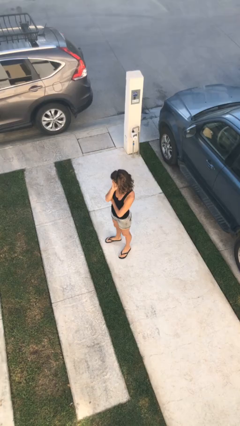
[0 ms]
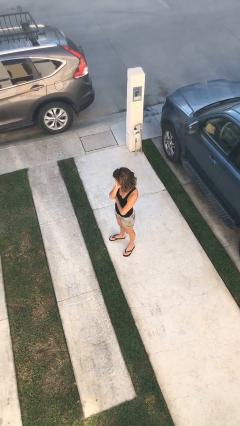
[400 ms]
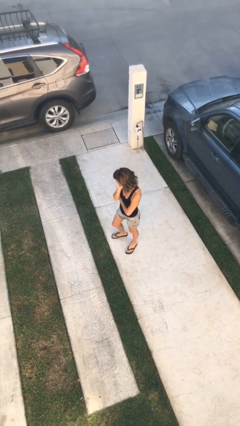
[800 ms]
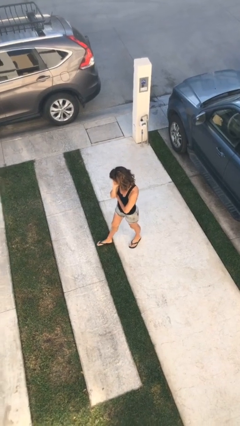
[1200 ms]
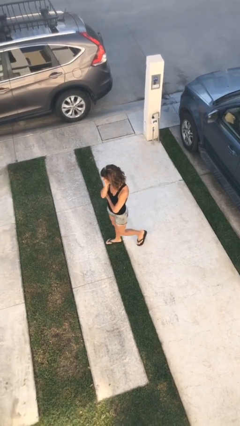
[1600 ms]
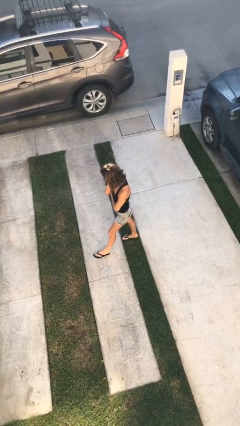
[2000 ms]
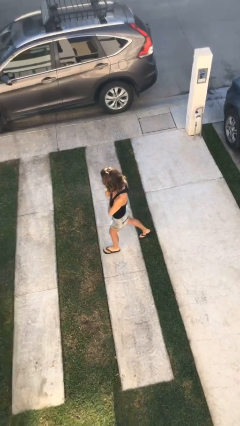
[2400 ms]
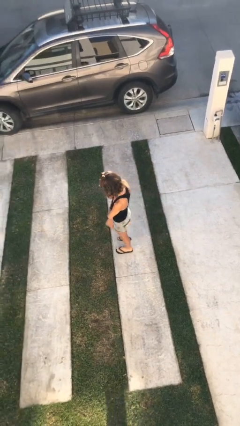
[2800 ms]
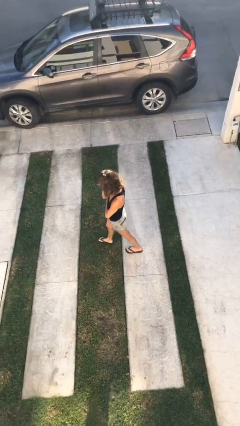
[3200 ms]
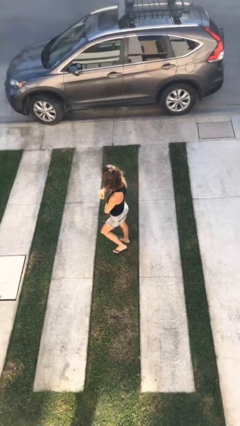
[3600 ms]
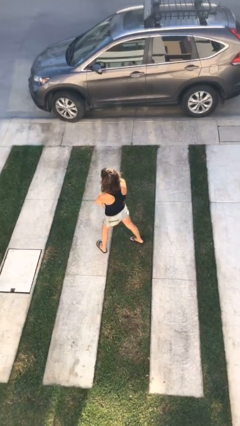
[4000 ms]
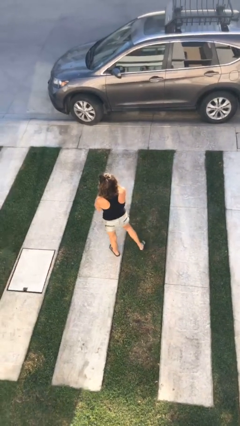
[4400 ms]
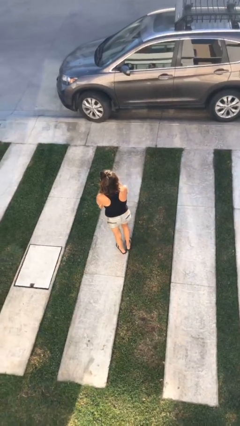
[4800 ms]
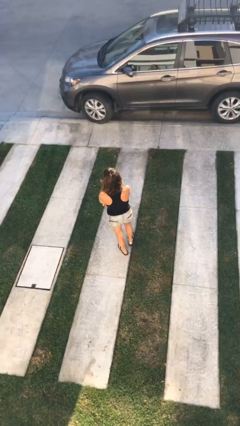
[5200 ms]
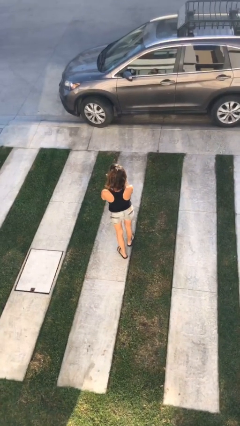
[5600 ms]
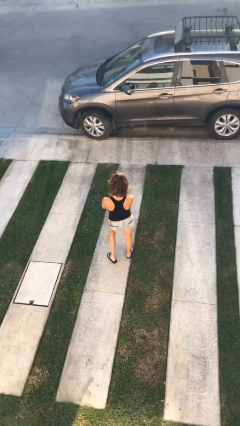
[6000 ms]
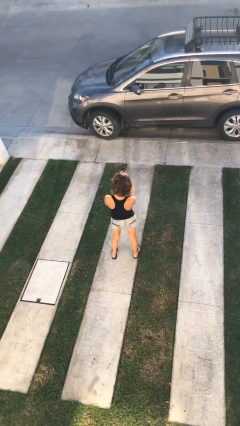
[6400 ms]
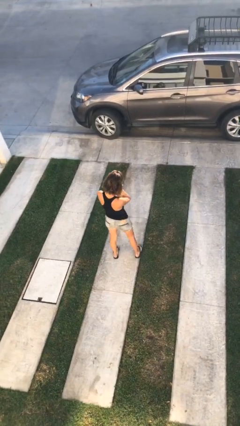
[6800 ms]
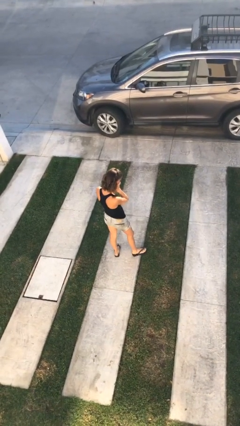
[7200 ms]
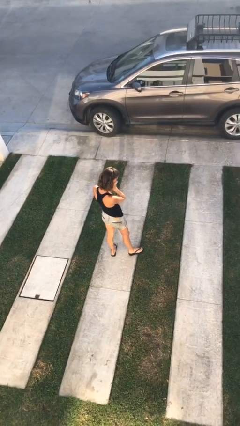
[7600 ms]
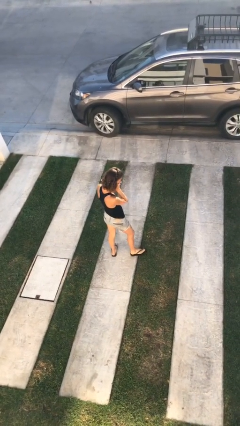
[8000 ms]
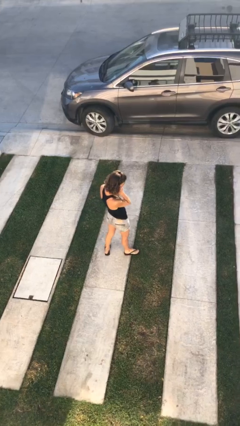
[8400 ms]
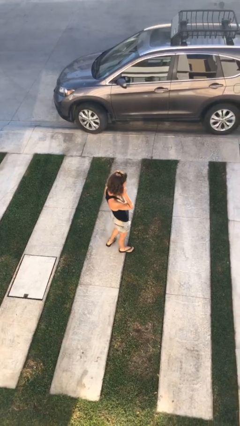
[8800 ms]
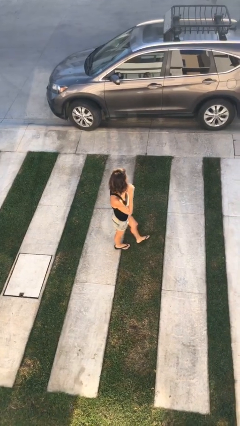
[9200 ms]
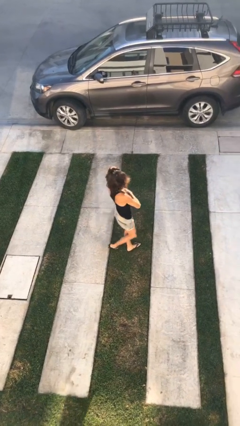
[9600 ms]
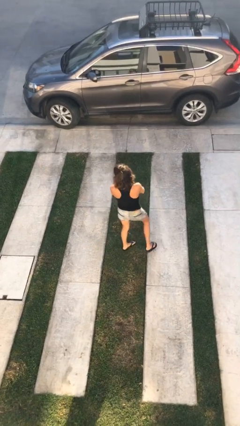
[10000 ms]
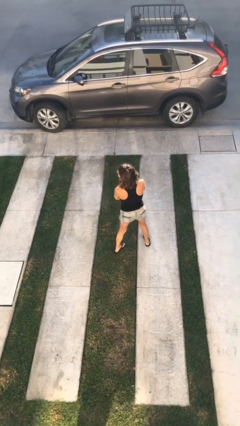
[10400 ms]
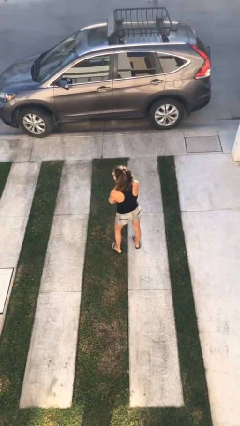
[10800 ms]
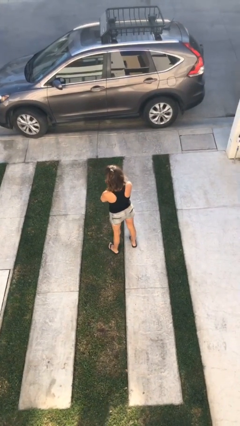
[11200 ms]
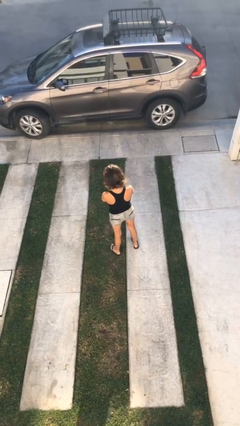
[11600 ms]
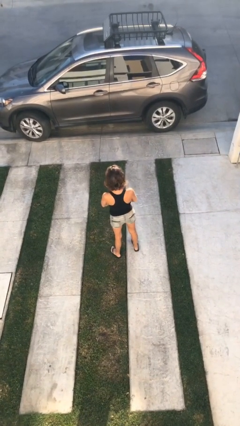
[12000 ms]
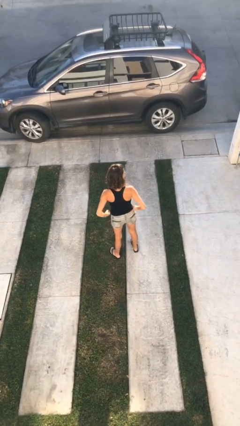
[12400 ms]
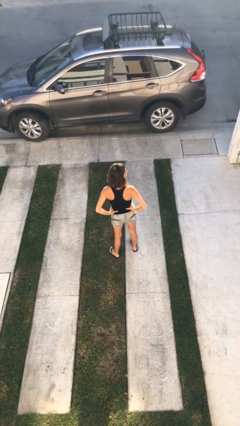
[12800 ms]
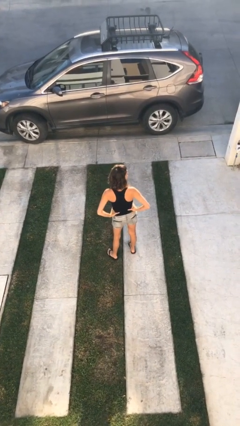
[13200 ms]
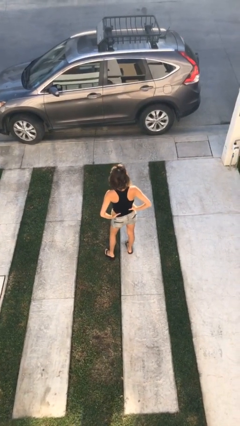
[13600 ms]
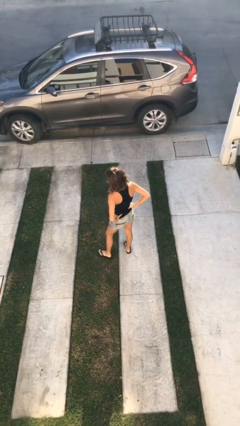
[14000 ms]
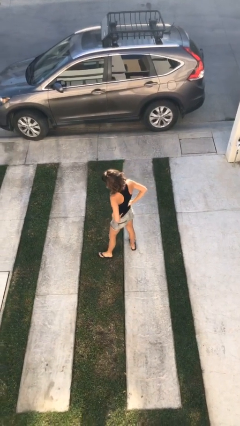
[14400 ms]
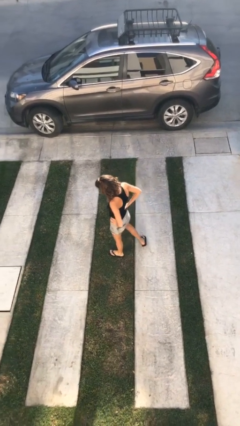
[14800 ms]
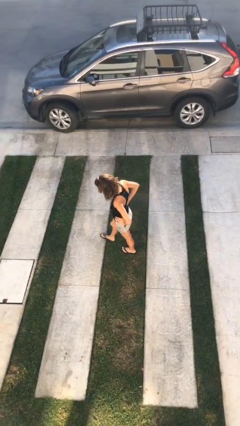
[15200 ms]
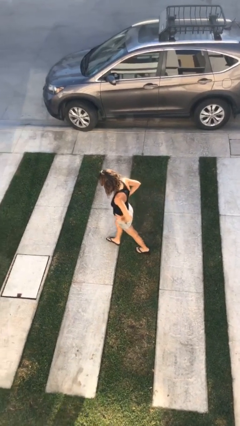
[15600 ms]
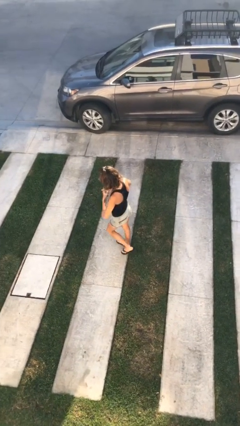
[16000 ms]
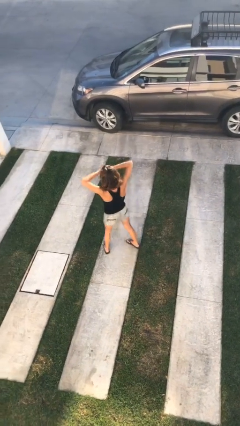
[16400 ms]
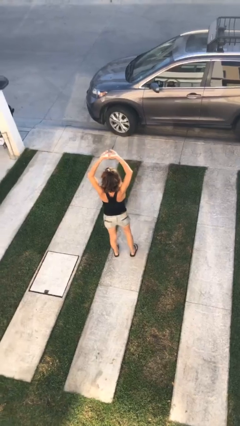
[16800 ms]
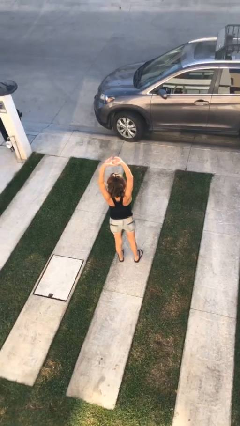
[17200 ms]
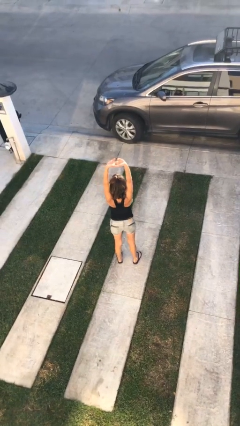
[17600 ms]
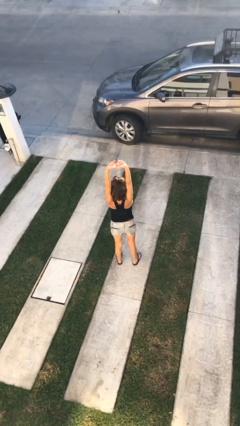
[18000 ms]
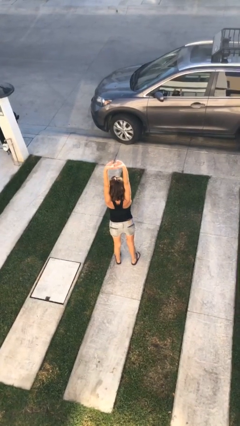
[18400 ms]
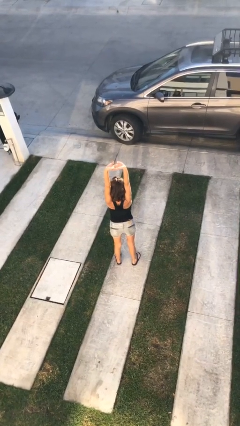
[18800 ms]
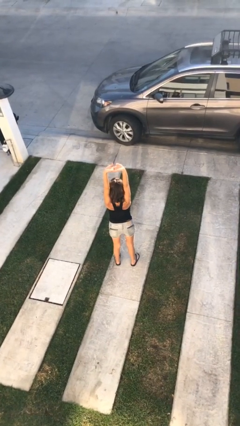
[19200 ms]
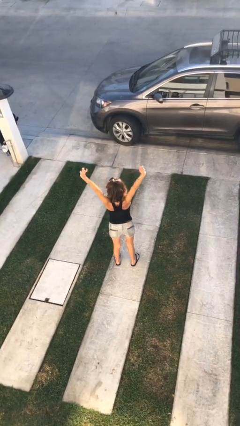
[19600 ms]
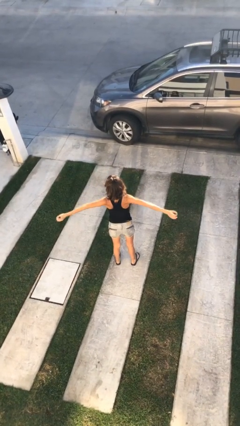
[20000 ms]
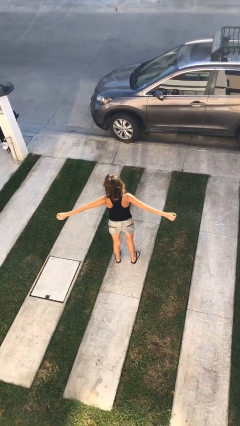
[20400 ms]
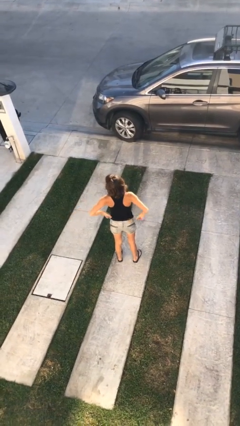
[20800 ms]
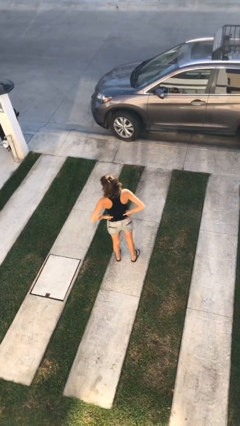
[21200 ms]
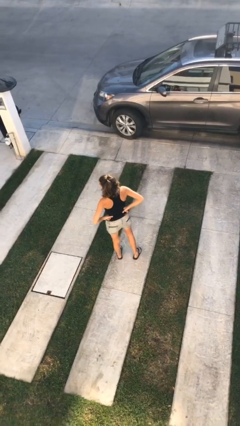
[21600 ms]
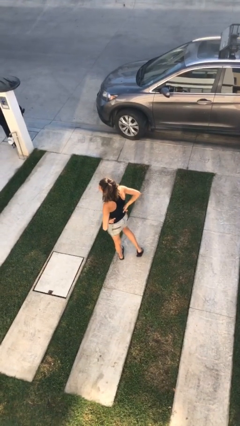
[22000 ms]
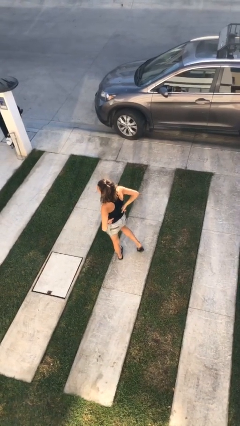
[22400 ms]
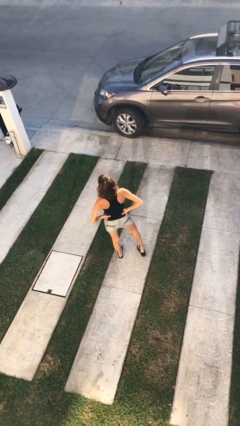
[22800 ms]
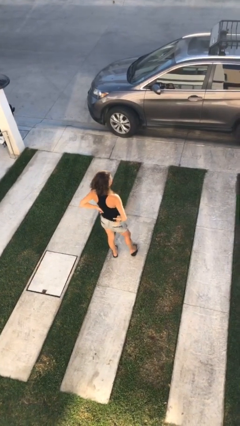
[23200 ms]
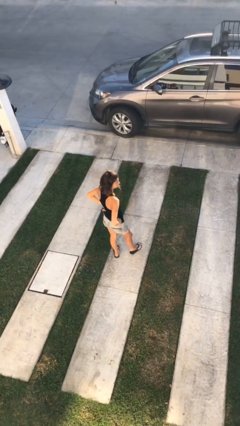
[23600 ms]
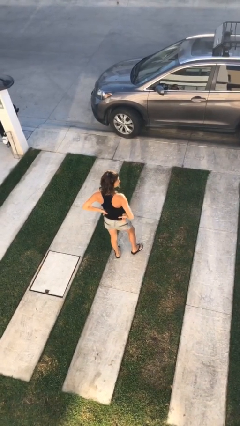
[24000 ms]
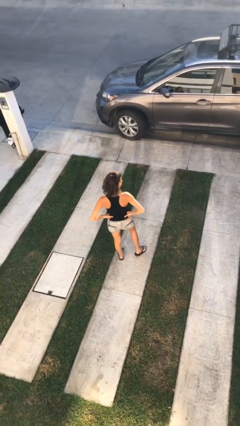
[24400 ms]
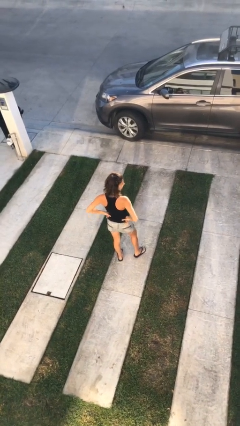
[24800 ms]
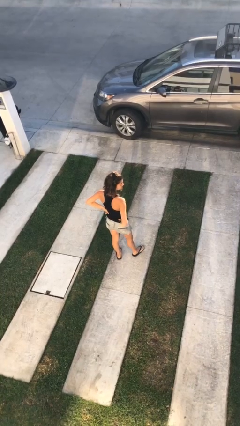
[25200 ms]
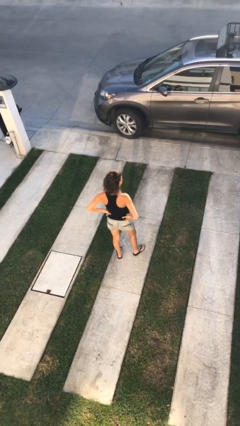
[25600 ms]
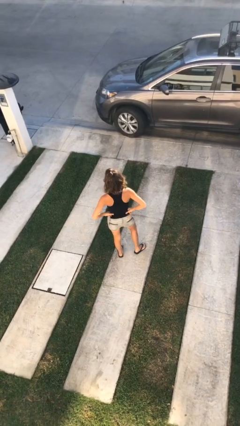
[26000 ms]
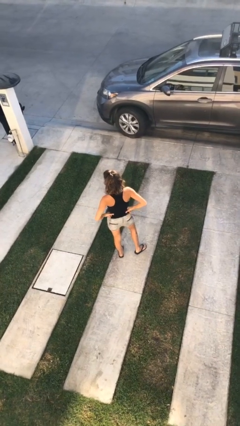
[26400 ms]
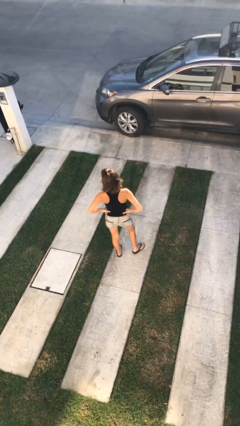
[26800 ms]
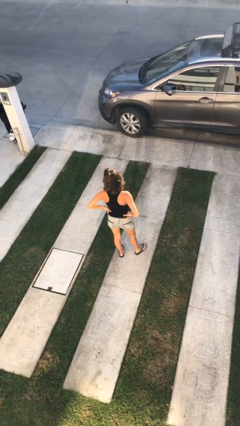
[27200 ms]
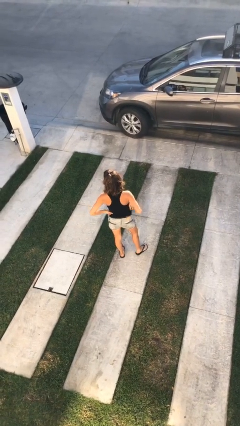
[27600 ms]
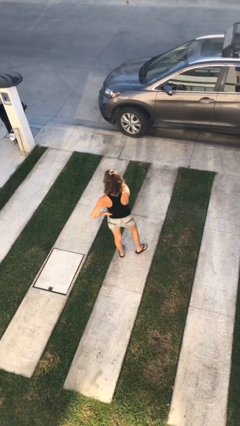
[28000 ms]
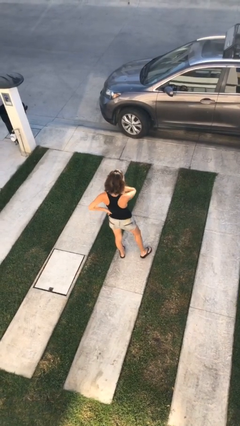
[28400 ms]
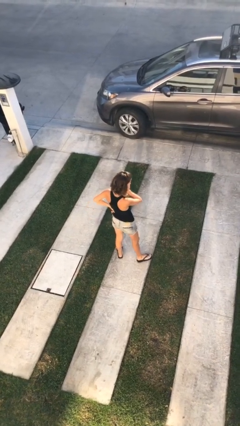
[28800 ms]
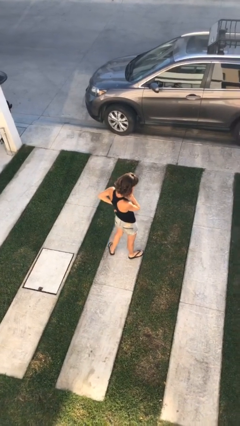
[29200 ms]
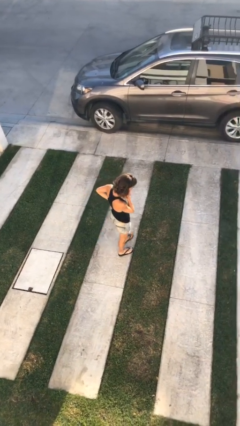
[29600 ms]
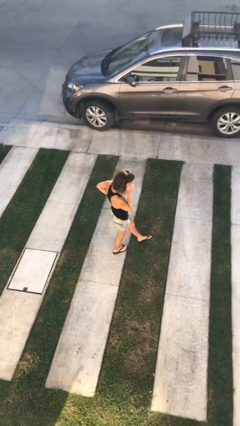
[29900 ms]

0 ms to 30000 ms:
person walks

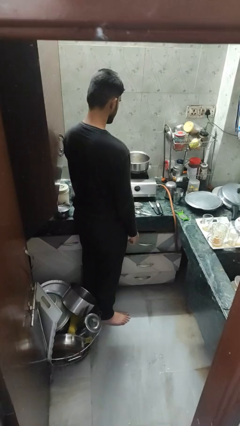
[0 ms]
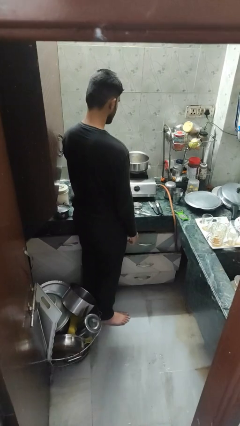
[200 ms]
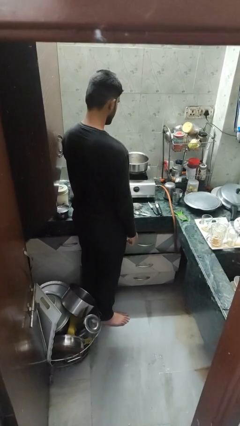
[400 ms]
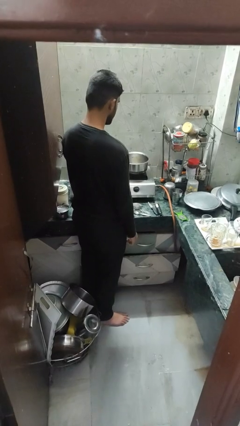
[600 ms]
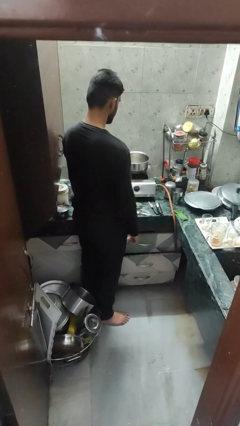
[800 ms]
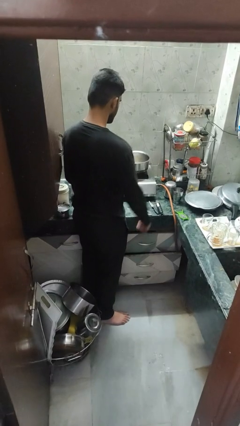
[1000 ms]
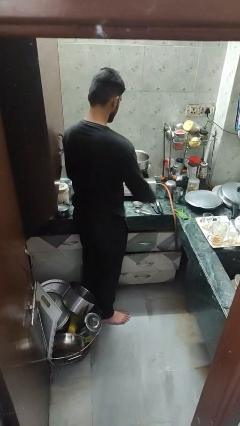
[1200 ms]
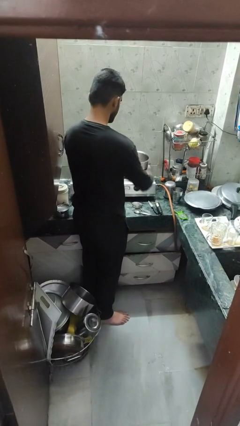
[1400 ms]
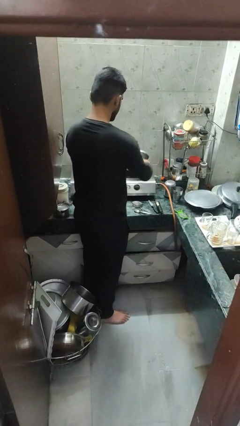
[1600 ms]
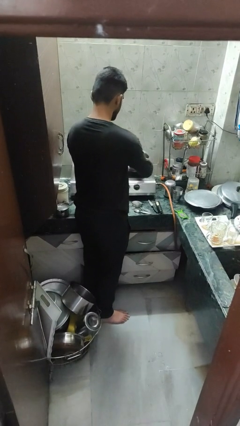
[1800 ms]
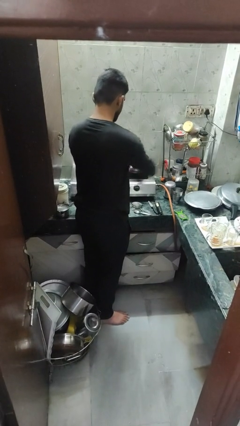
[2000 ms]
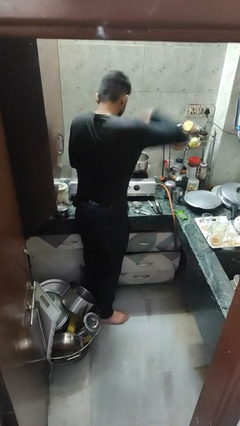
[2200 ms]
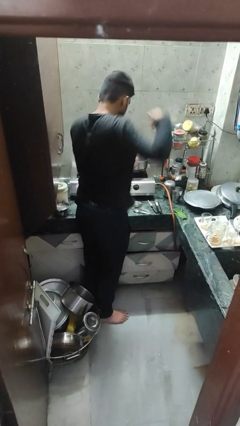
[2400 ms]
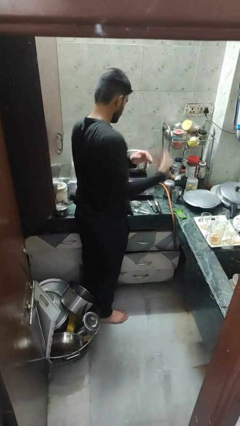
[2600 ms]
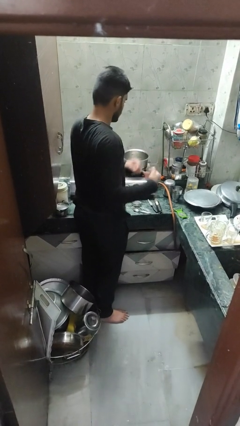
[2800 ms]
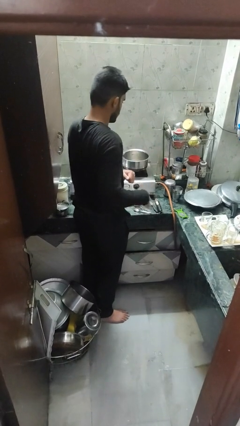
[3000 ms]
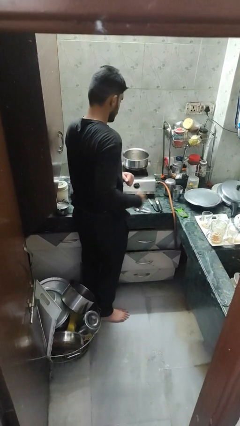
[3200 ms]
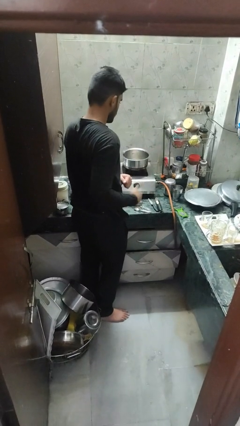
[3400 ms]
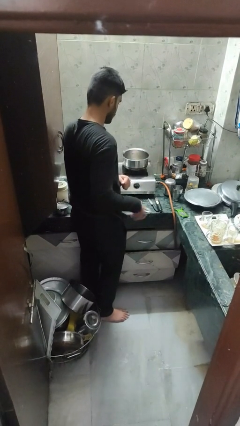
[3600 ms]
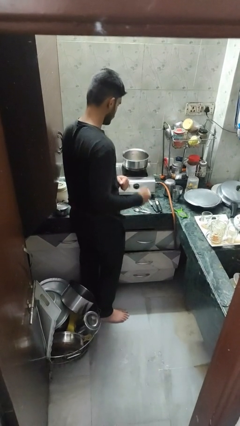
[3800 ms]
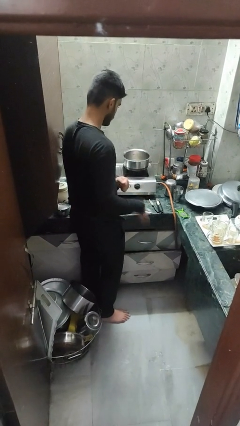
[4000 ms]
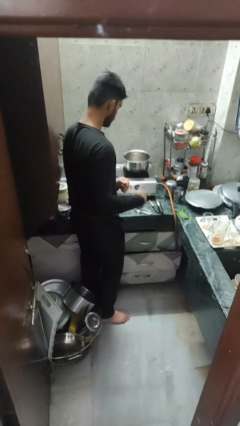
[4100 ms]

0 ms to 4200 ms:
person burns hand
